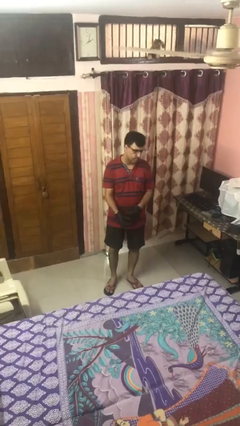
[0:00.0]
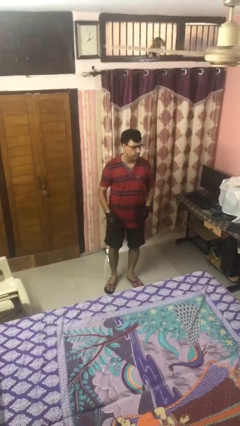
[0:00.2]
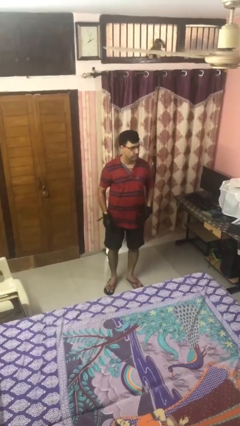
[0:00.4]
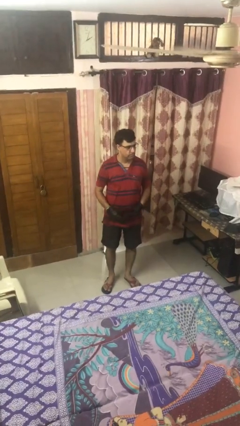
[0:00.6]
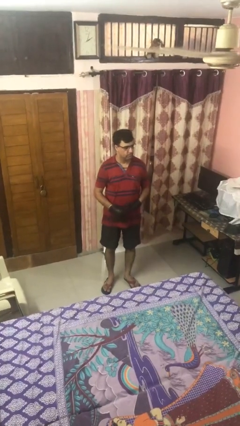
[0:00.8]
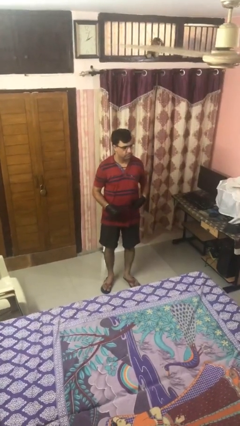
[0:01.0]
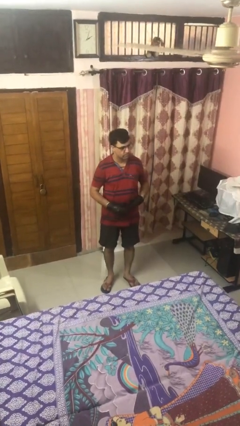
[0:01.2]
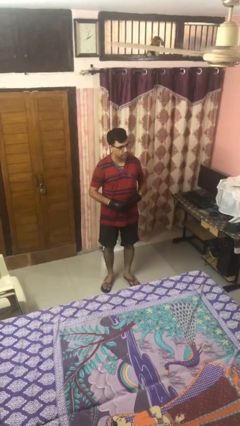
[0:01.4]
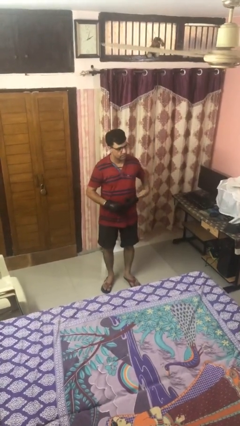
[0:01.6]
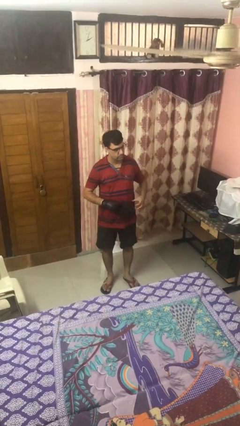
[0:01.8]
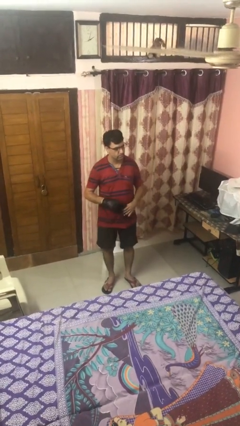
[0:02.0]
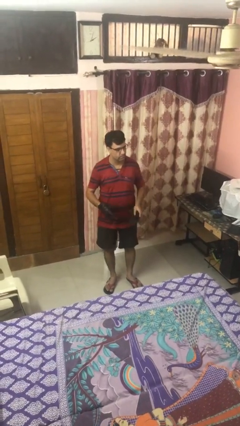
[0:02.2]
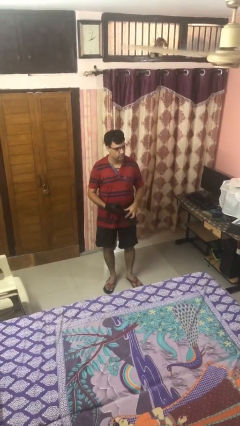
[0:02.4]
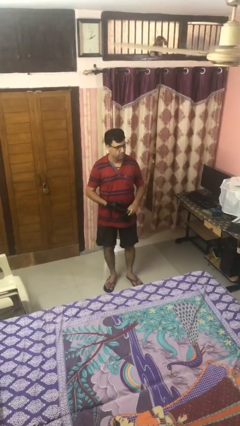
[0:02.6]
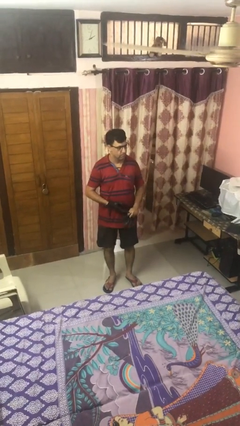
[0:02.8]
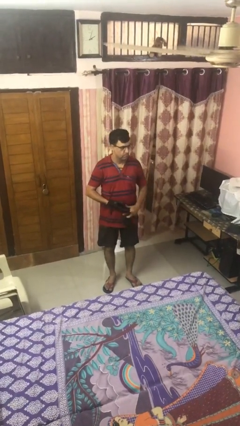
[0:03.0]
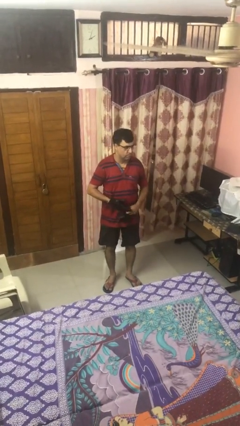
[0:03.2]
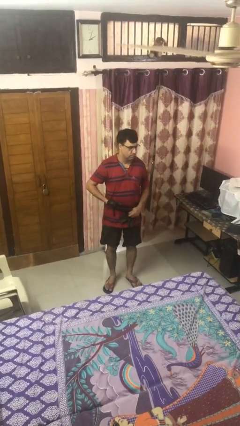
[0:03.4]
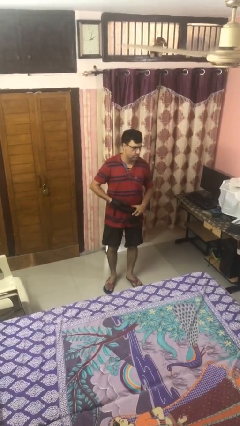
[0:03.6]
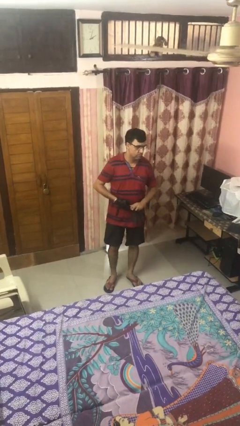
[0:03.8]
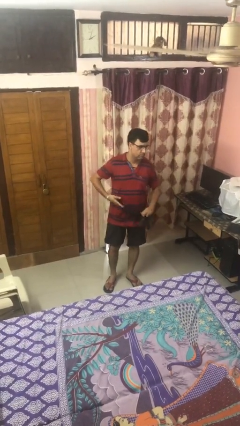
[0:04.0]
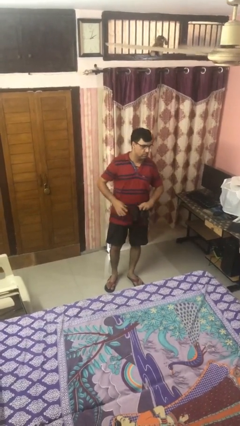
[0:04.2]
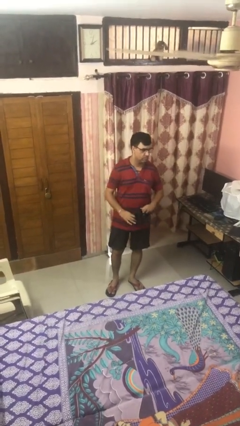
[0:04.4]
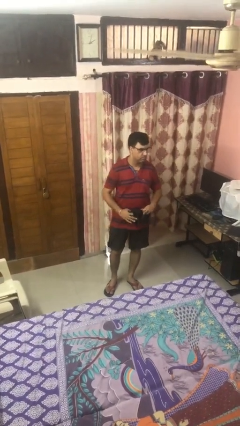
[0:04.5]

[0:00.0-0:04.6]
person takes off gloves

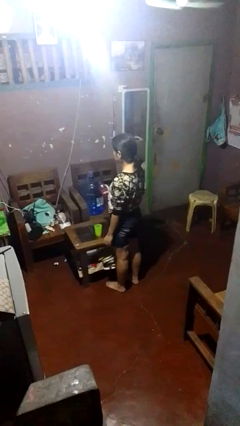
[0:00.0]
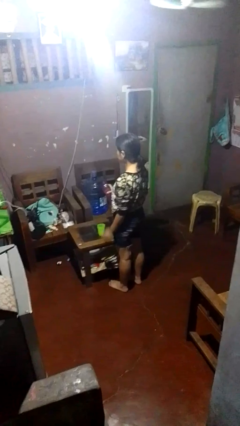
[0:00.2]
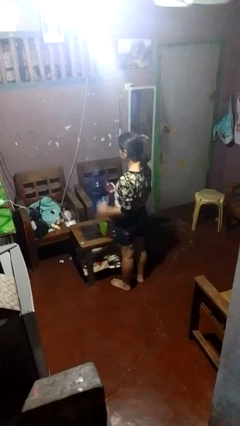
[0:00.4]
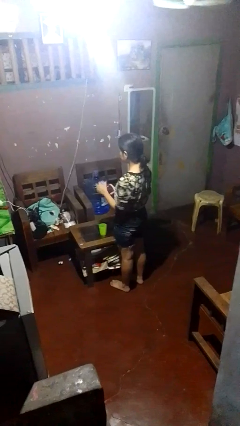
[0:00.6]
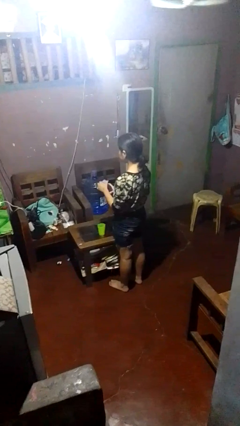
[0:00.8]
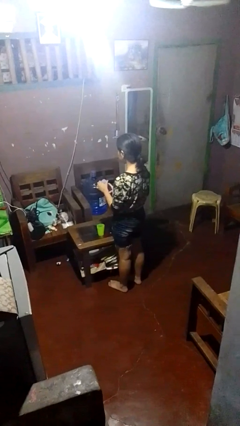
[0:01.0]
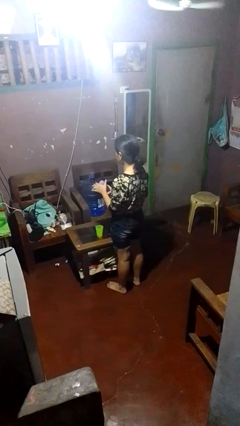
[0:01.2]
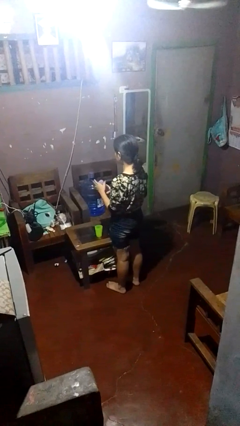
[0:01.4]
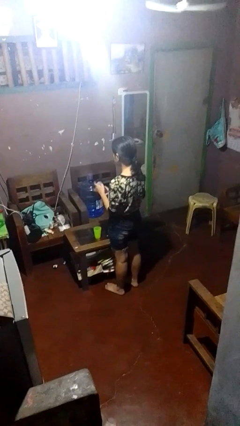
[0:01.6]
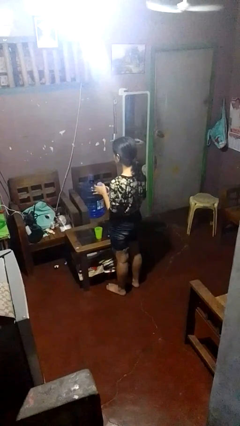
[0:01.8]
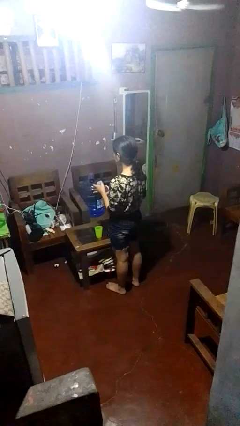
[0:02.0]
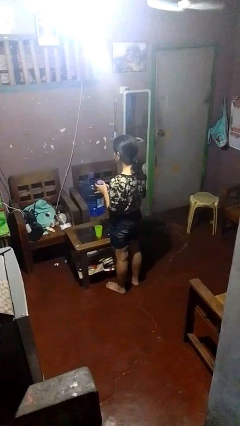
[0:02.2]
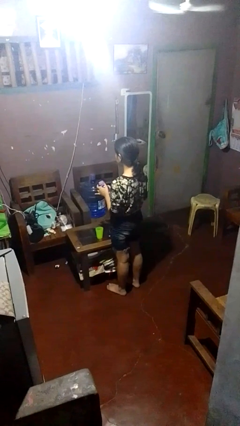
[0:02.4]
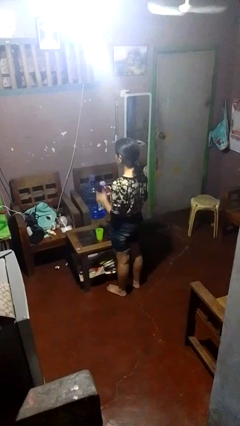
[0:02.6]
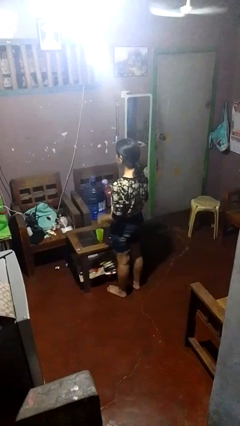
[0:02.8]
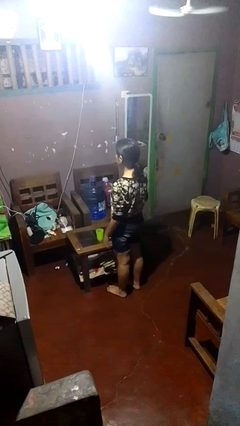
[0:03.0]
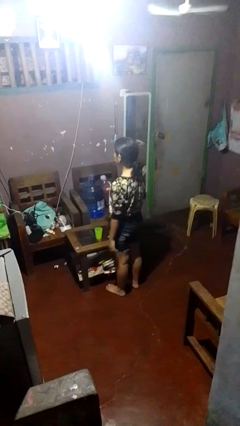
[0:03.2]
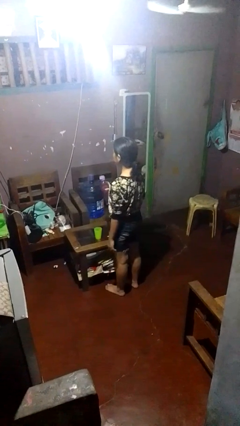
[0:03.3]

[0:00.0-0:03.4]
person screws lid to bottle

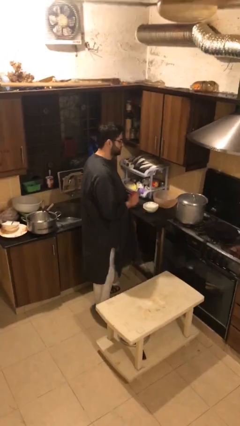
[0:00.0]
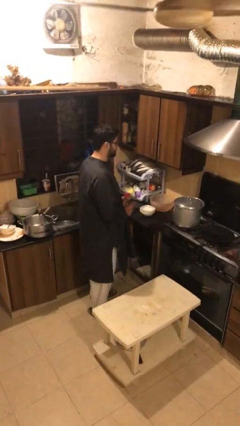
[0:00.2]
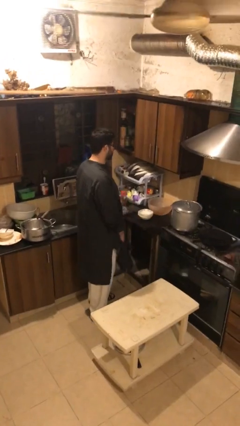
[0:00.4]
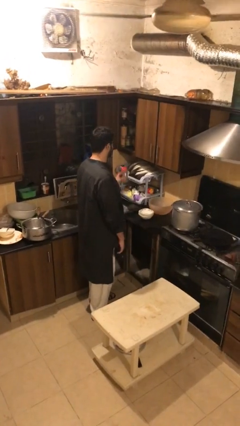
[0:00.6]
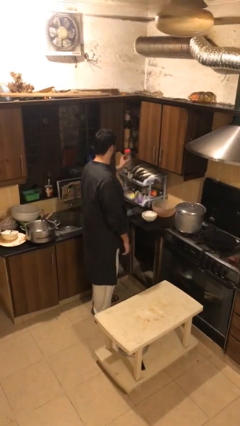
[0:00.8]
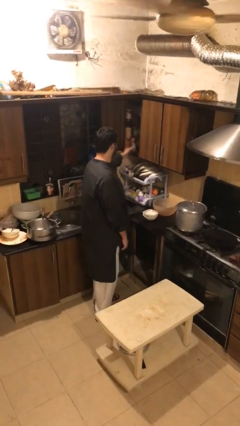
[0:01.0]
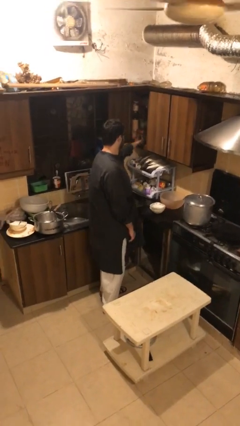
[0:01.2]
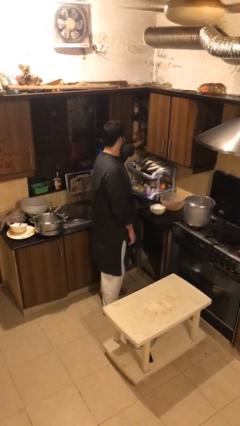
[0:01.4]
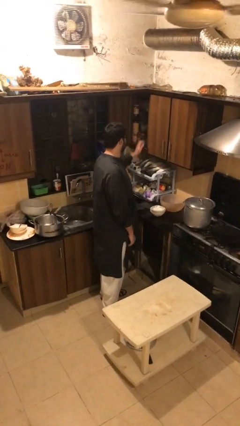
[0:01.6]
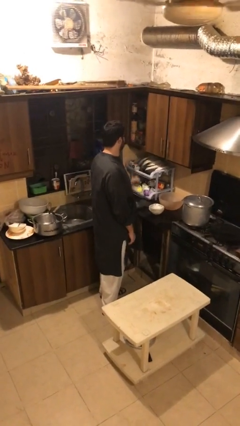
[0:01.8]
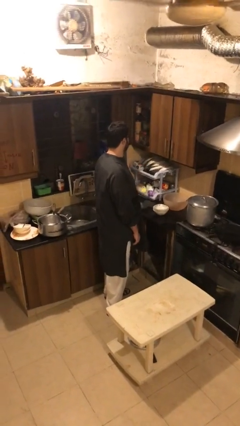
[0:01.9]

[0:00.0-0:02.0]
person puts down object on shelf

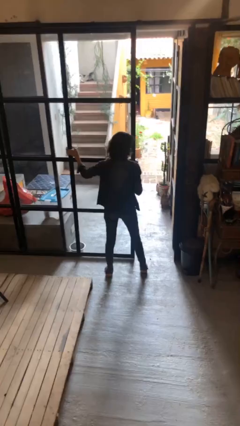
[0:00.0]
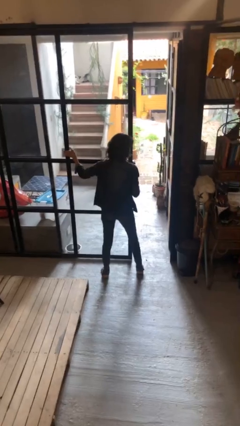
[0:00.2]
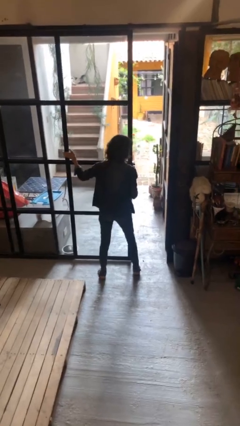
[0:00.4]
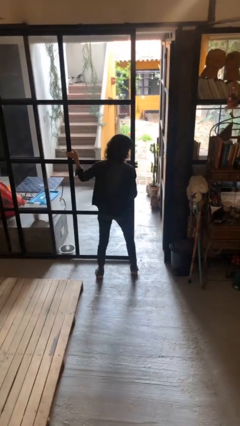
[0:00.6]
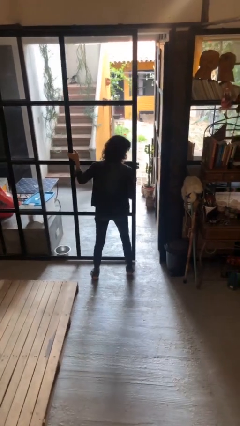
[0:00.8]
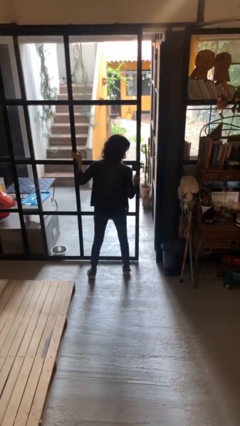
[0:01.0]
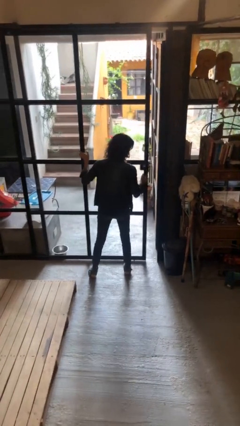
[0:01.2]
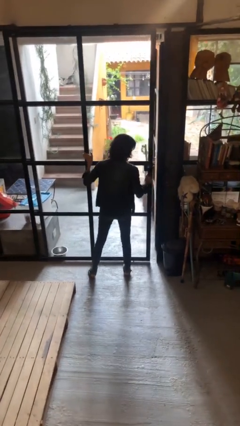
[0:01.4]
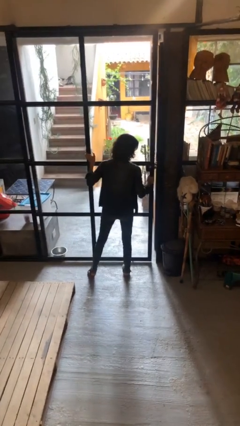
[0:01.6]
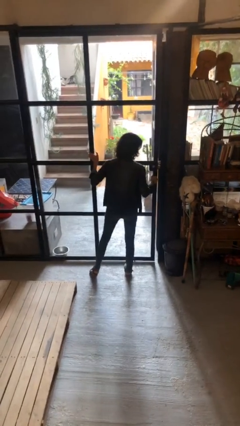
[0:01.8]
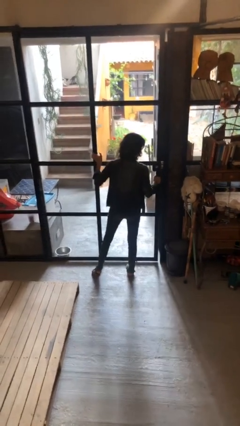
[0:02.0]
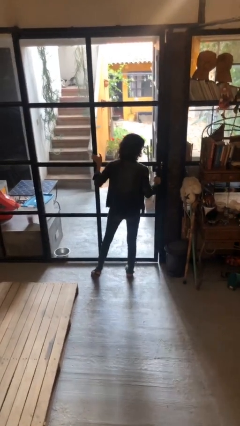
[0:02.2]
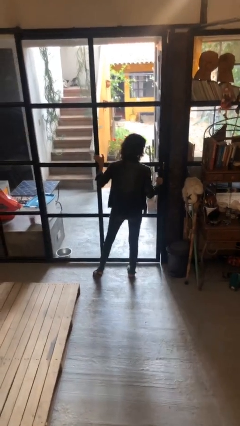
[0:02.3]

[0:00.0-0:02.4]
person closes sliding door

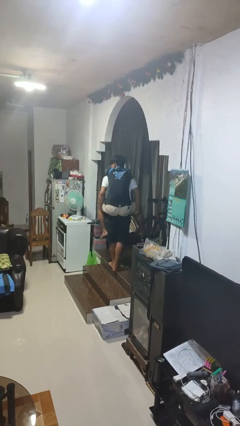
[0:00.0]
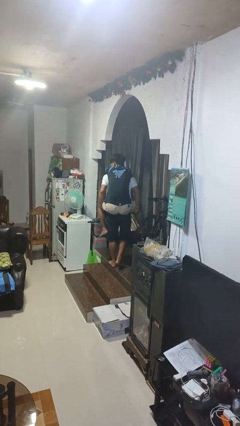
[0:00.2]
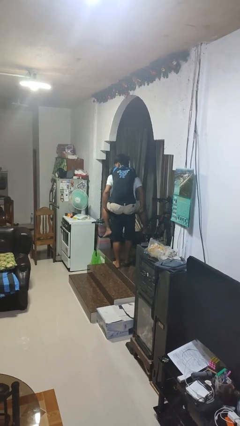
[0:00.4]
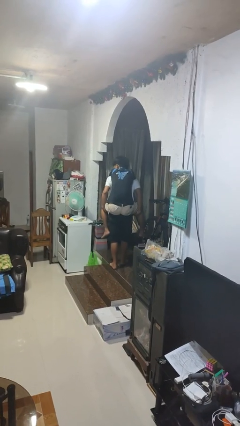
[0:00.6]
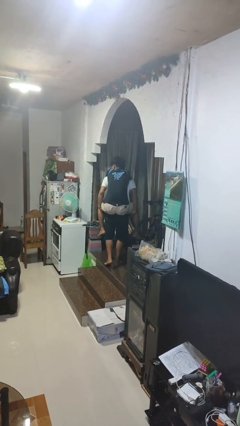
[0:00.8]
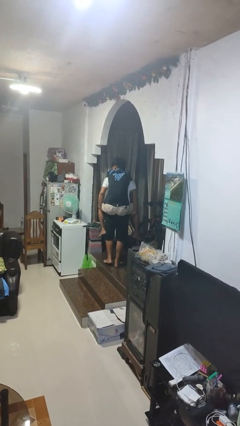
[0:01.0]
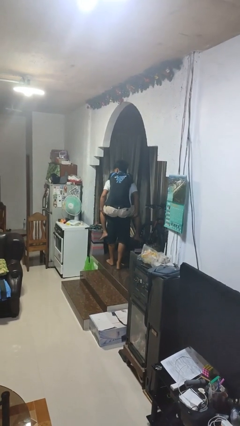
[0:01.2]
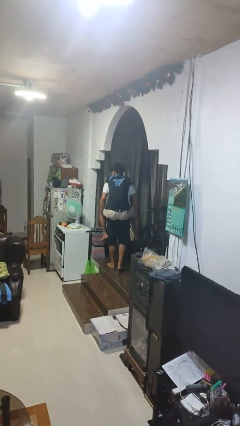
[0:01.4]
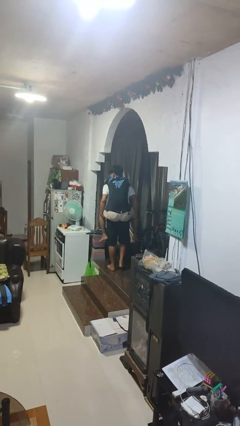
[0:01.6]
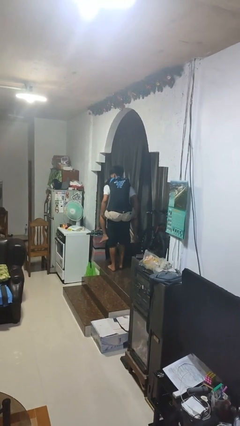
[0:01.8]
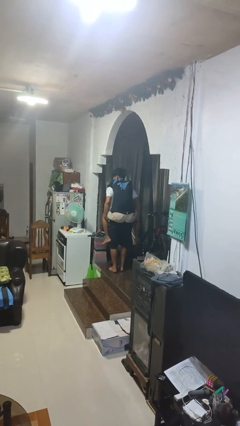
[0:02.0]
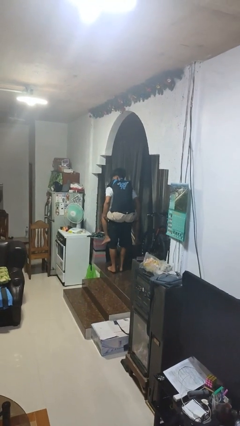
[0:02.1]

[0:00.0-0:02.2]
person carries person on back

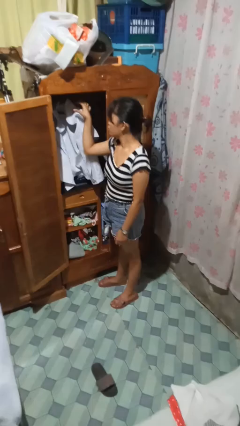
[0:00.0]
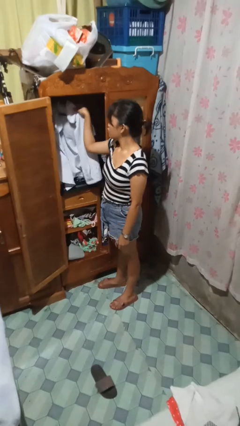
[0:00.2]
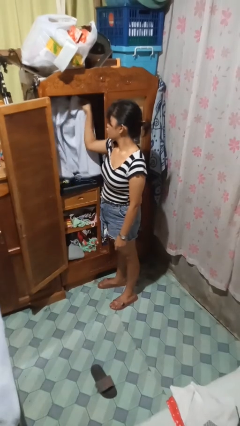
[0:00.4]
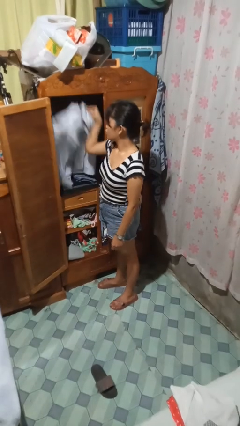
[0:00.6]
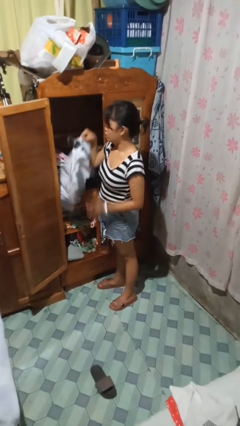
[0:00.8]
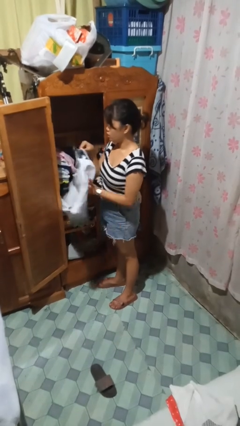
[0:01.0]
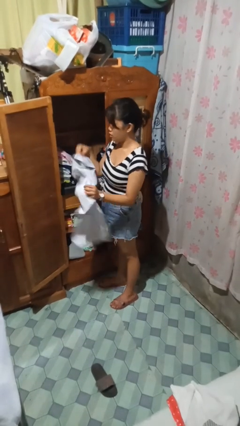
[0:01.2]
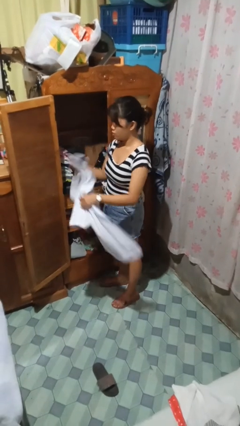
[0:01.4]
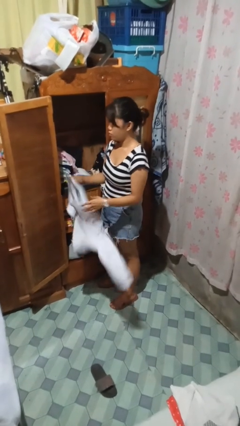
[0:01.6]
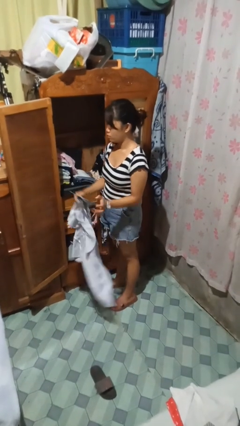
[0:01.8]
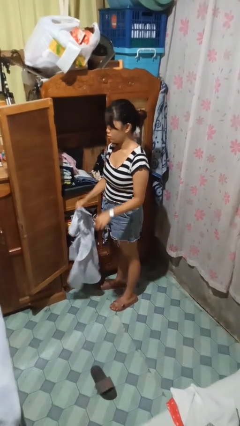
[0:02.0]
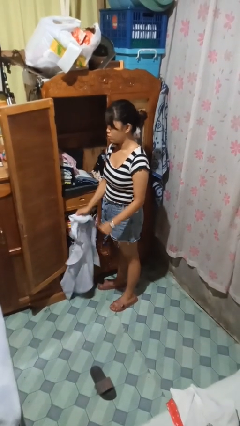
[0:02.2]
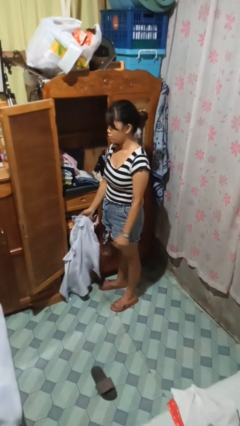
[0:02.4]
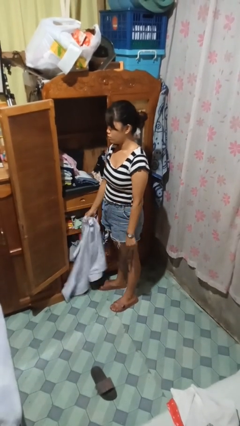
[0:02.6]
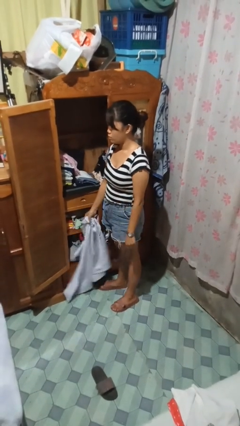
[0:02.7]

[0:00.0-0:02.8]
person takes clothes from closet
